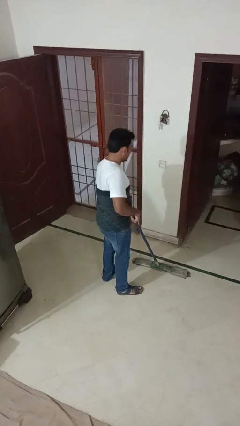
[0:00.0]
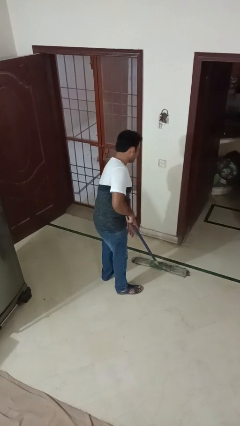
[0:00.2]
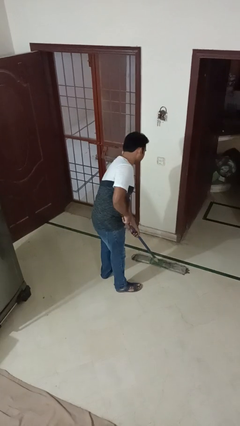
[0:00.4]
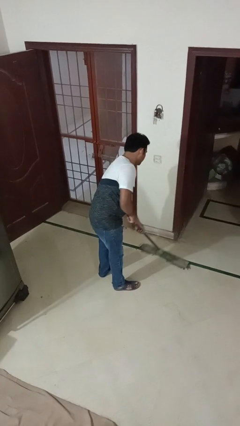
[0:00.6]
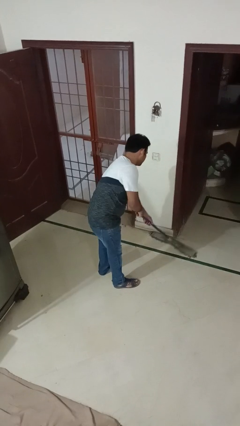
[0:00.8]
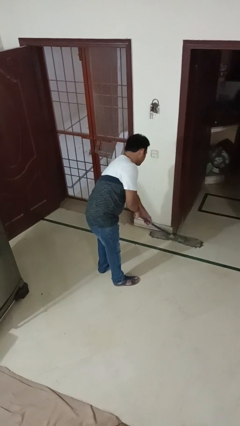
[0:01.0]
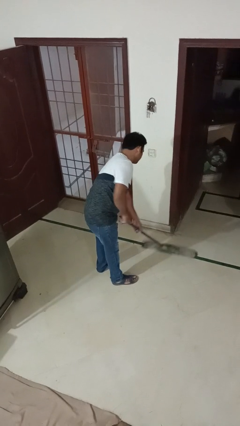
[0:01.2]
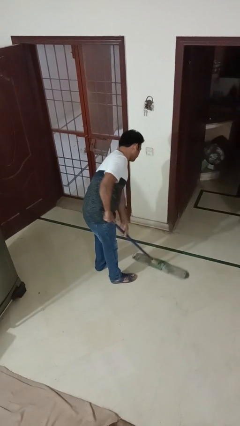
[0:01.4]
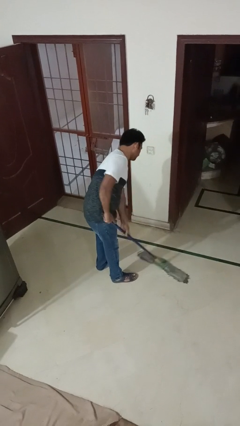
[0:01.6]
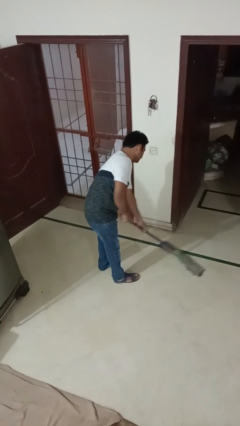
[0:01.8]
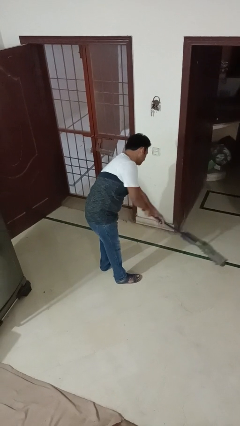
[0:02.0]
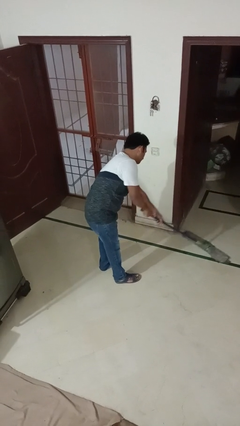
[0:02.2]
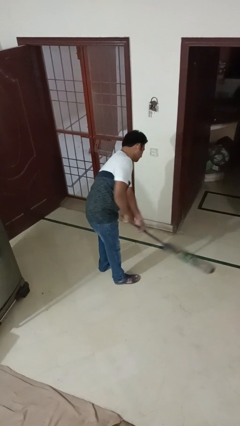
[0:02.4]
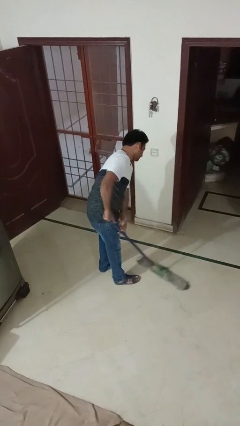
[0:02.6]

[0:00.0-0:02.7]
person mops

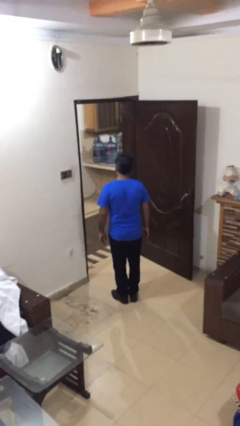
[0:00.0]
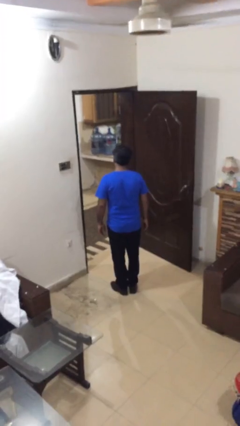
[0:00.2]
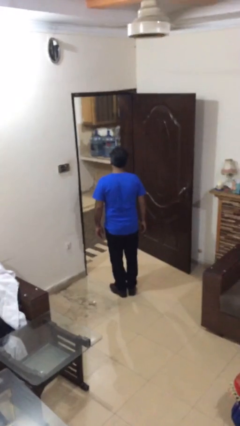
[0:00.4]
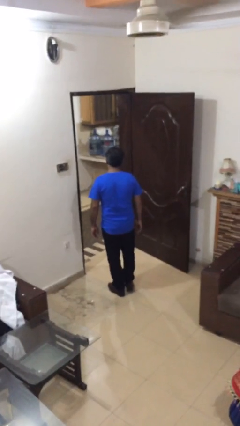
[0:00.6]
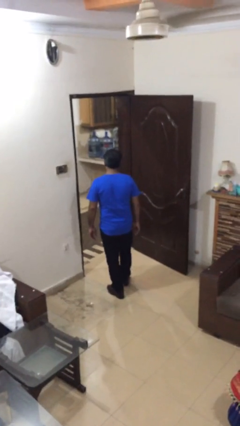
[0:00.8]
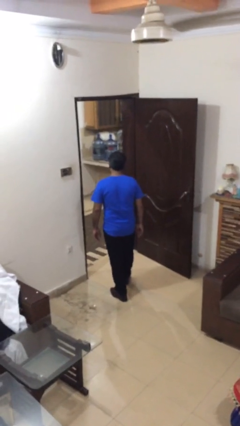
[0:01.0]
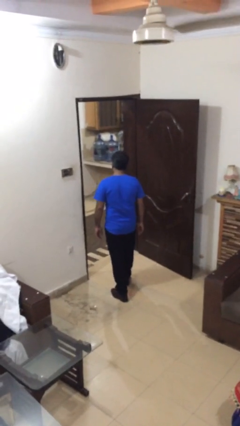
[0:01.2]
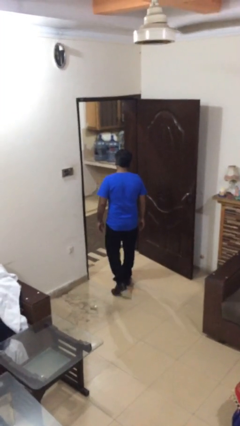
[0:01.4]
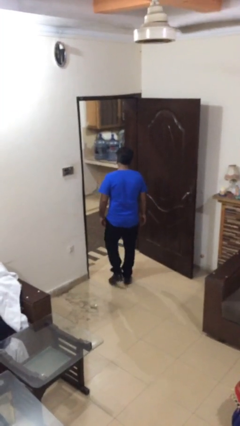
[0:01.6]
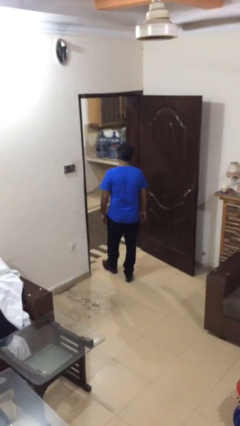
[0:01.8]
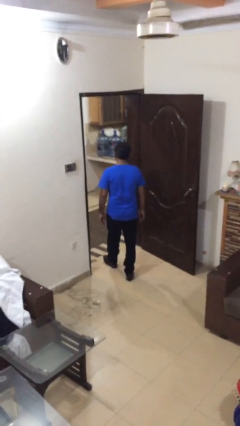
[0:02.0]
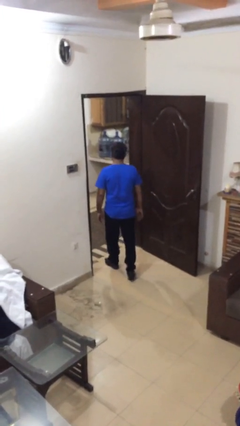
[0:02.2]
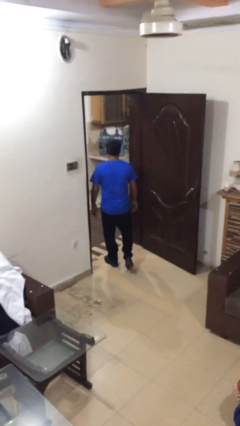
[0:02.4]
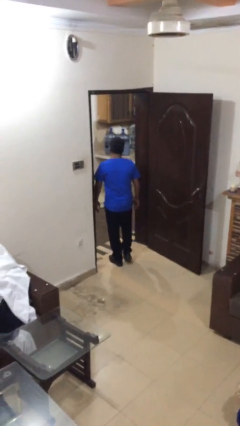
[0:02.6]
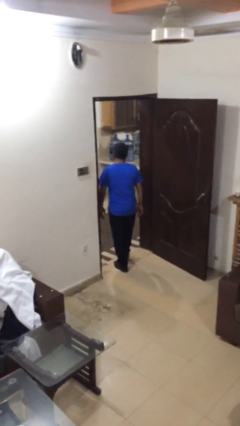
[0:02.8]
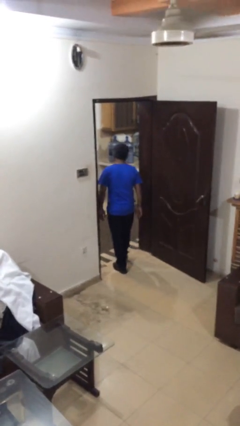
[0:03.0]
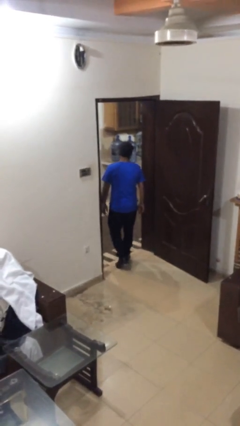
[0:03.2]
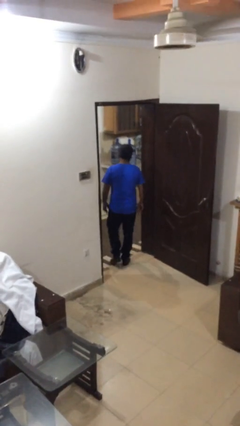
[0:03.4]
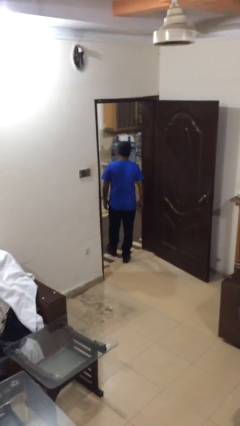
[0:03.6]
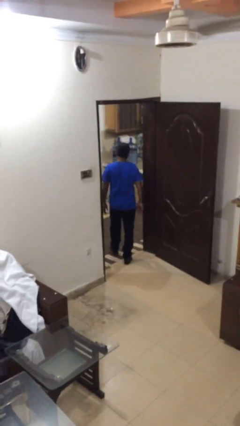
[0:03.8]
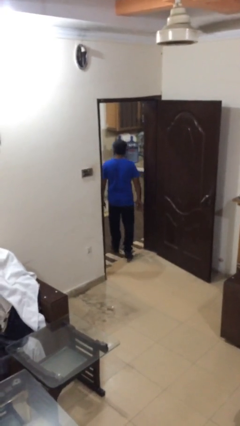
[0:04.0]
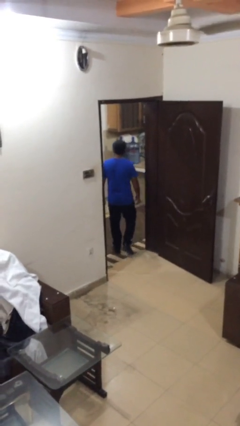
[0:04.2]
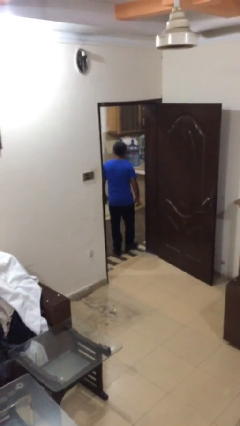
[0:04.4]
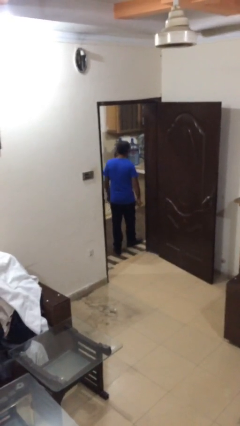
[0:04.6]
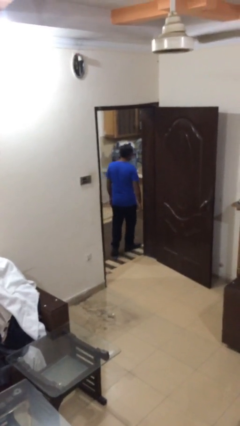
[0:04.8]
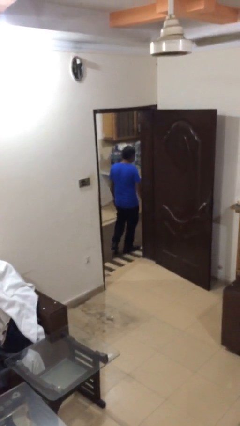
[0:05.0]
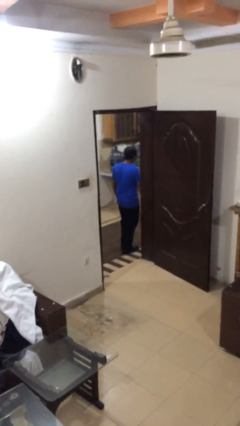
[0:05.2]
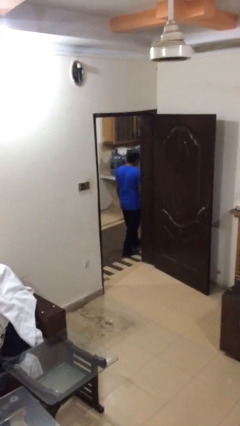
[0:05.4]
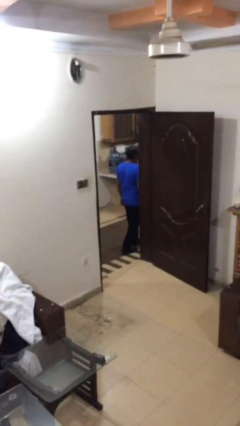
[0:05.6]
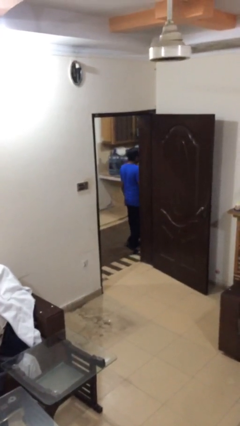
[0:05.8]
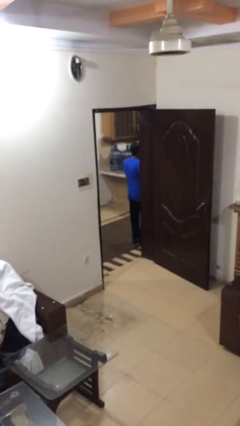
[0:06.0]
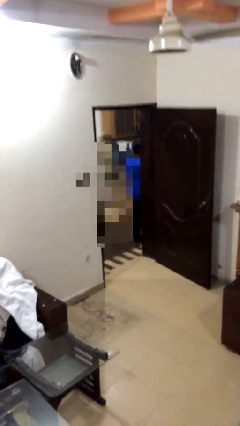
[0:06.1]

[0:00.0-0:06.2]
person exits scene through structure

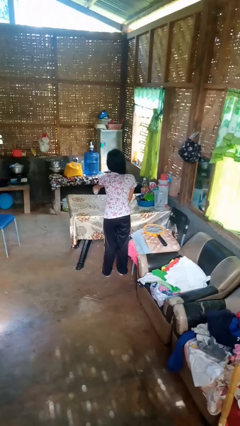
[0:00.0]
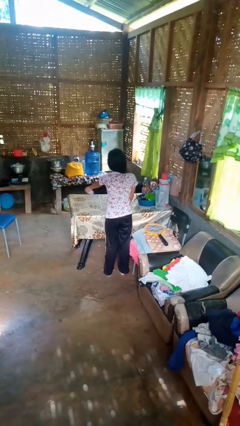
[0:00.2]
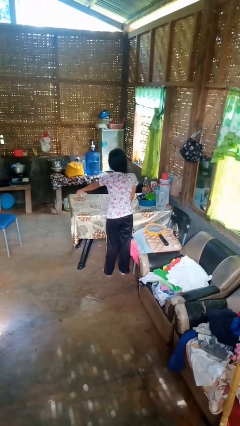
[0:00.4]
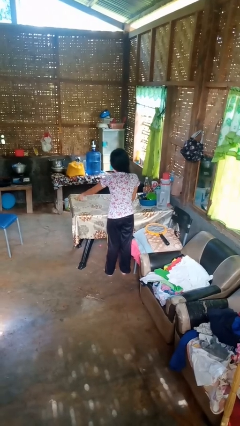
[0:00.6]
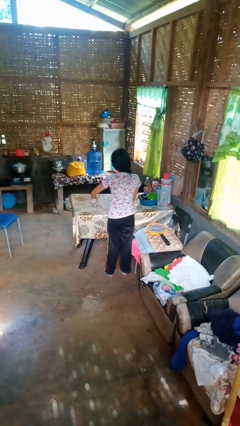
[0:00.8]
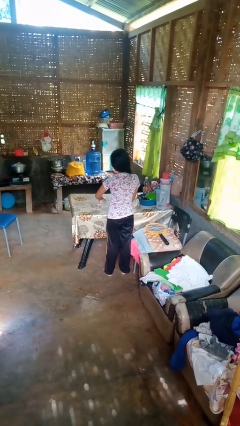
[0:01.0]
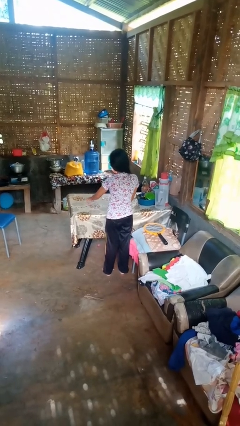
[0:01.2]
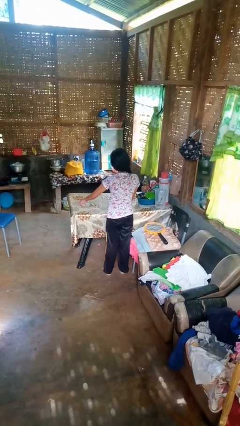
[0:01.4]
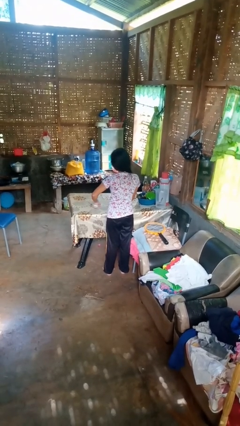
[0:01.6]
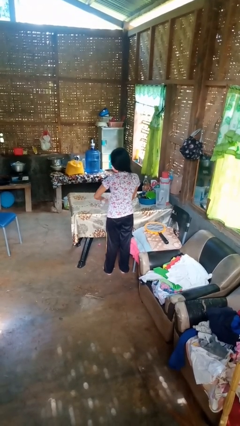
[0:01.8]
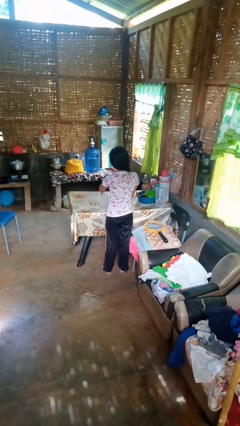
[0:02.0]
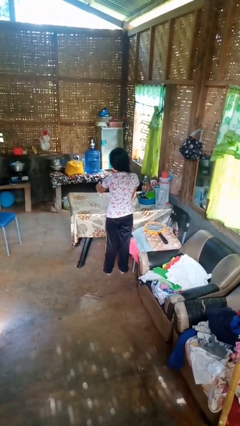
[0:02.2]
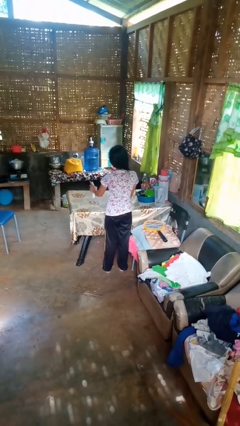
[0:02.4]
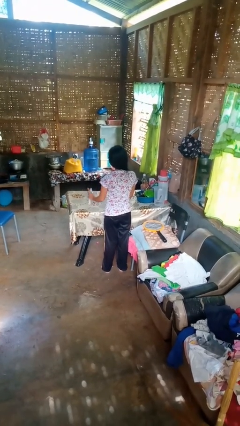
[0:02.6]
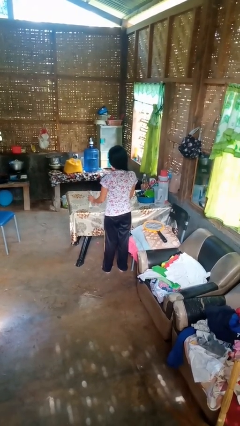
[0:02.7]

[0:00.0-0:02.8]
person sprays from bottle

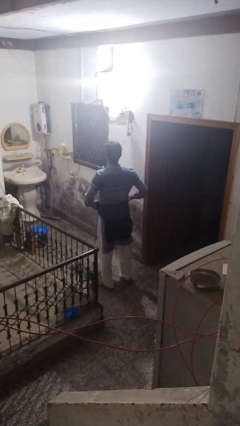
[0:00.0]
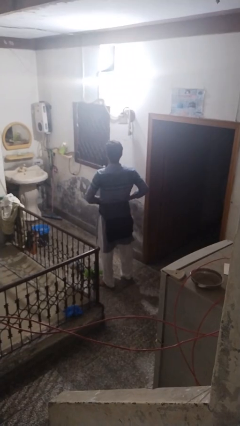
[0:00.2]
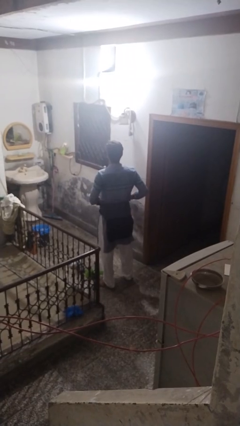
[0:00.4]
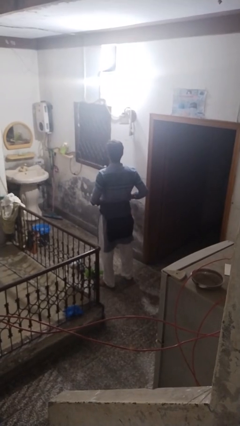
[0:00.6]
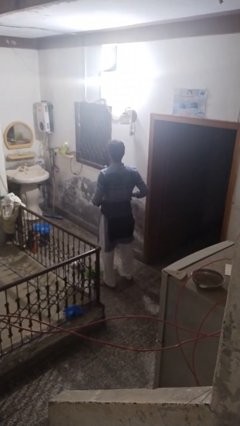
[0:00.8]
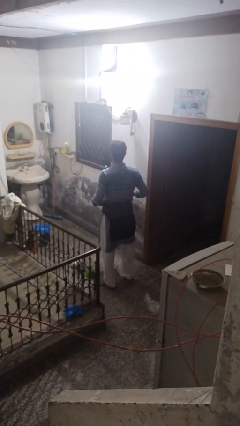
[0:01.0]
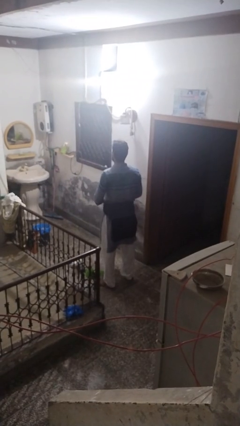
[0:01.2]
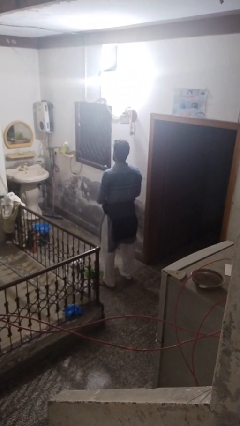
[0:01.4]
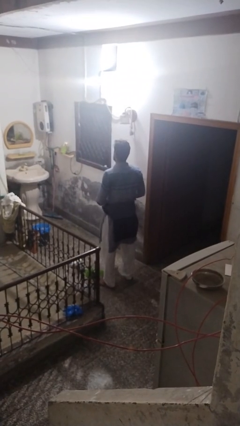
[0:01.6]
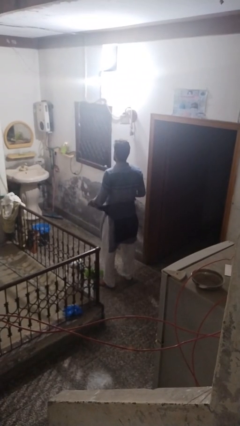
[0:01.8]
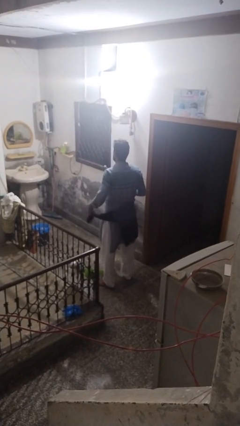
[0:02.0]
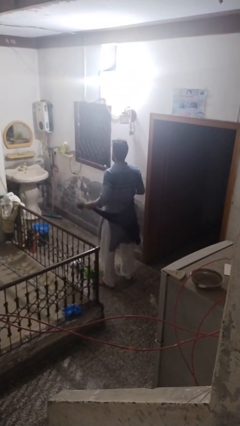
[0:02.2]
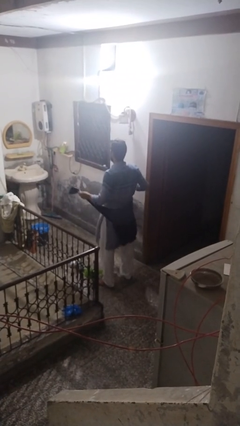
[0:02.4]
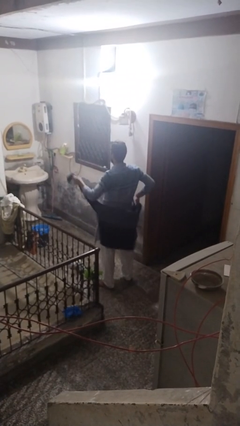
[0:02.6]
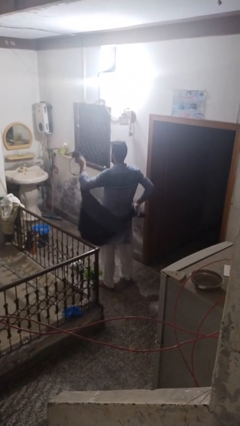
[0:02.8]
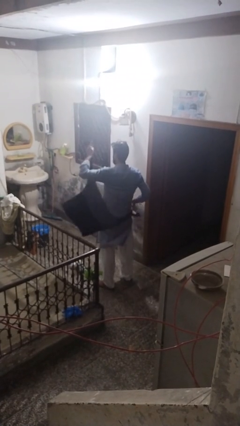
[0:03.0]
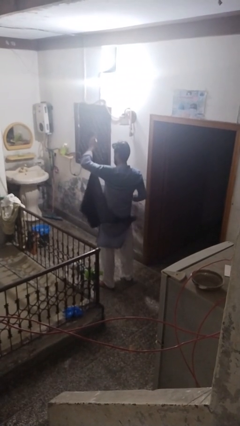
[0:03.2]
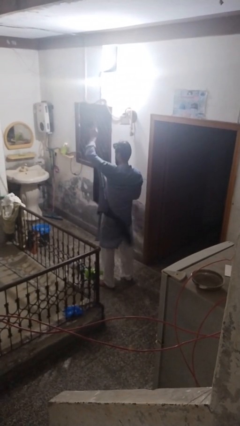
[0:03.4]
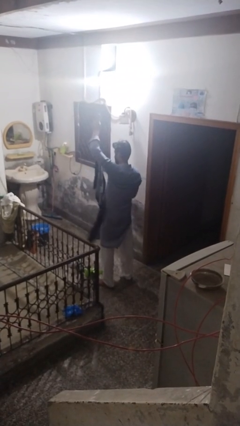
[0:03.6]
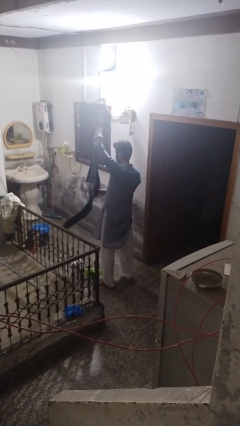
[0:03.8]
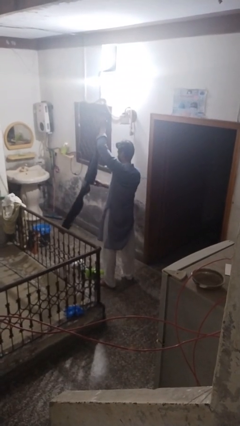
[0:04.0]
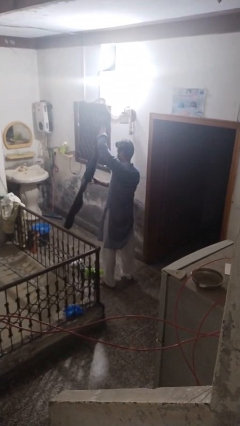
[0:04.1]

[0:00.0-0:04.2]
person unties jacket around waist

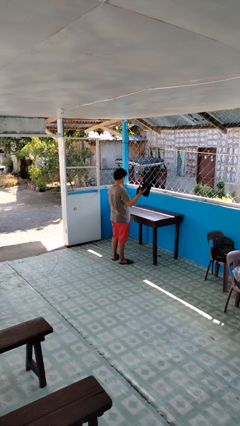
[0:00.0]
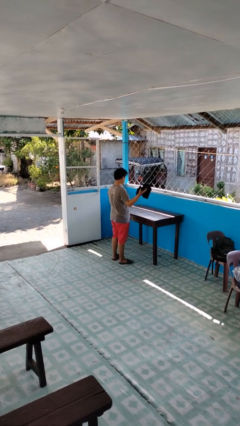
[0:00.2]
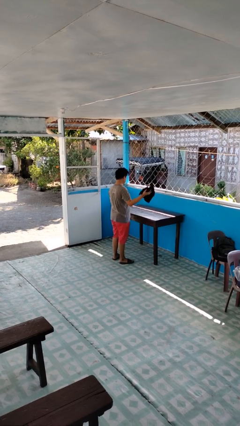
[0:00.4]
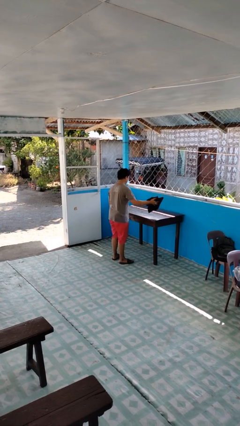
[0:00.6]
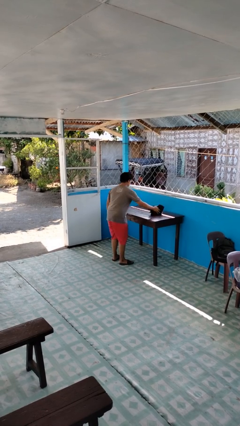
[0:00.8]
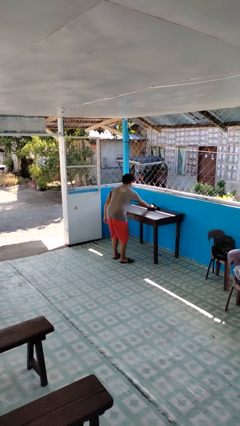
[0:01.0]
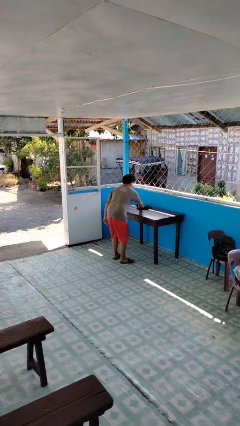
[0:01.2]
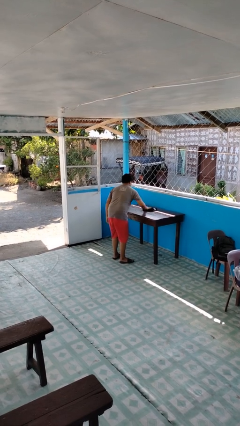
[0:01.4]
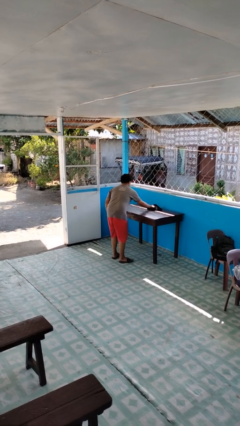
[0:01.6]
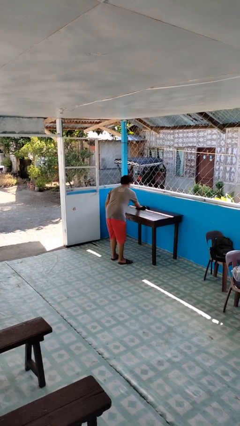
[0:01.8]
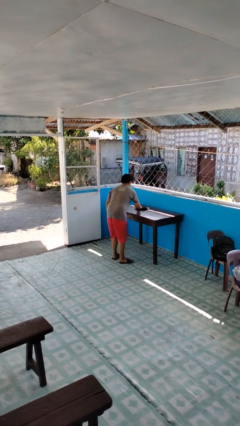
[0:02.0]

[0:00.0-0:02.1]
person cleans table with rag
